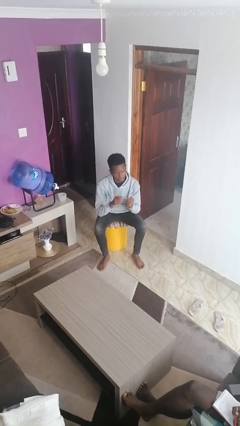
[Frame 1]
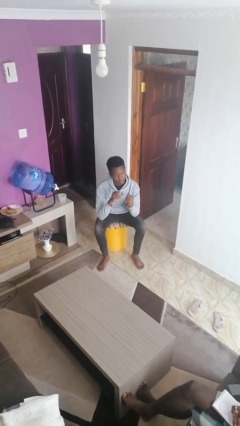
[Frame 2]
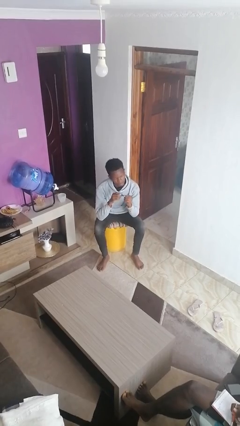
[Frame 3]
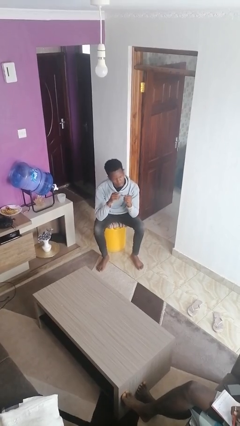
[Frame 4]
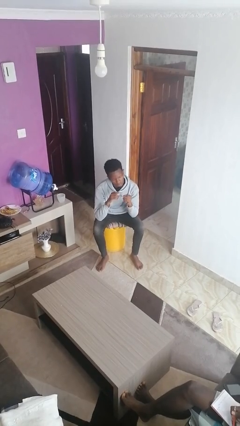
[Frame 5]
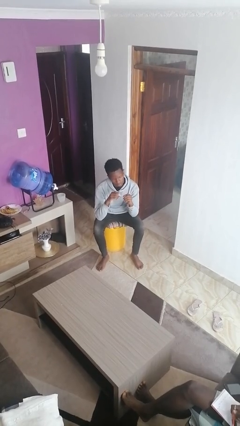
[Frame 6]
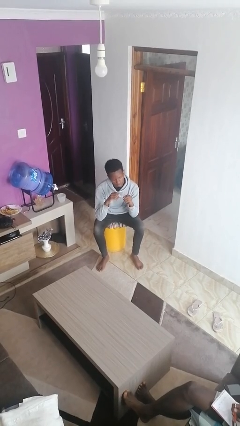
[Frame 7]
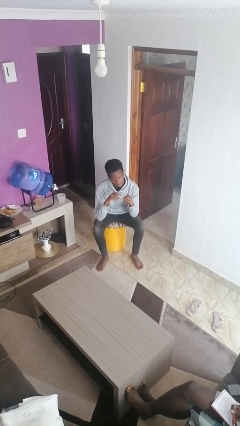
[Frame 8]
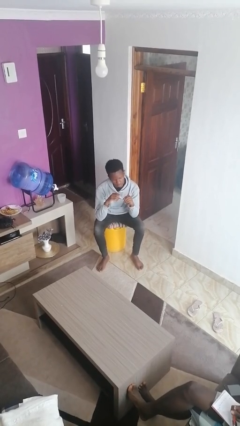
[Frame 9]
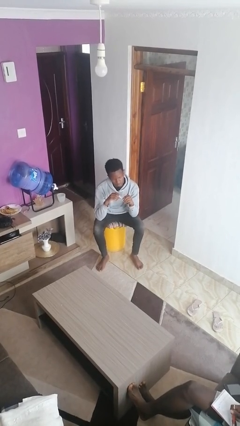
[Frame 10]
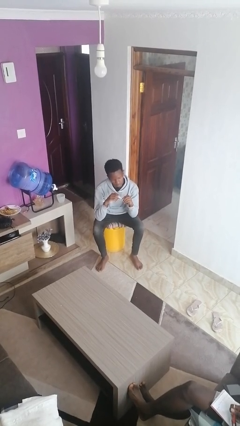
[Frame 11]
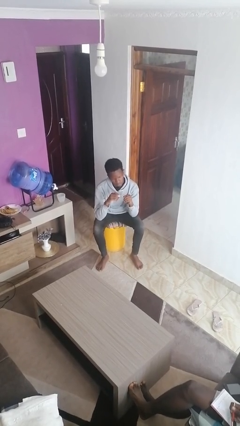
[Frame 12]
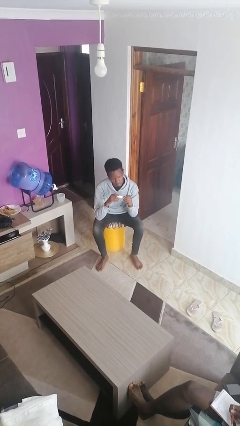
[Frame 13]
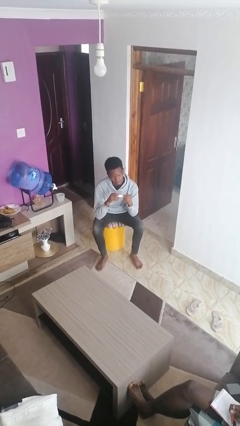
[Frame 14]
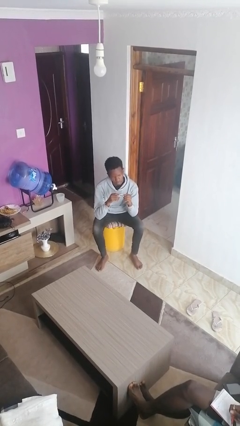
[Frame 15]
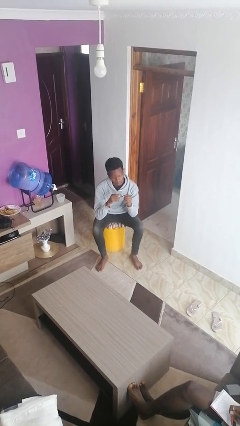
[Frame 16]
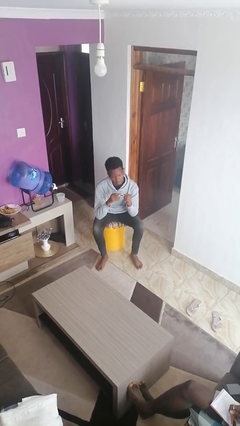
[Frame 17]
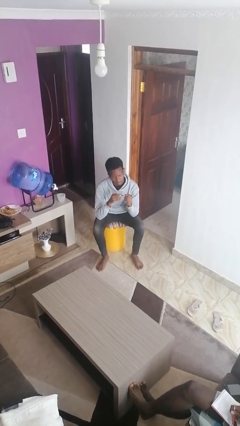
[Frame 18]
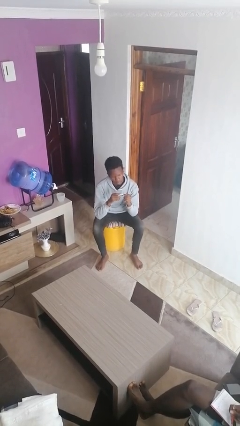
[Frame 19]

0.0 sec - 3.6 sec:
person clips fingernails

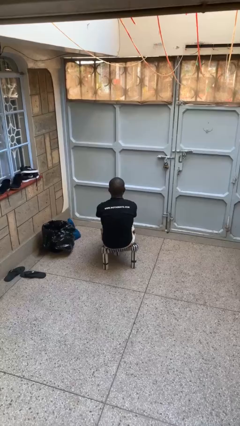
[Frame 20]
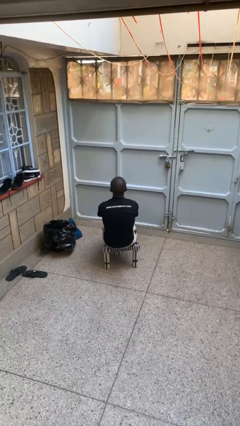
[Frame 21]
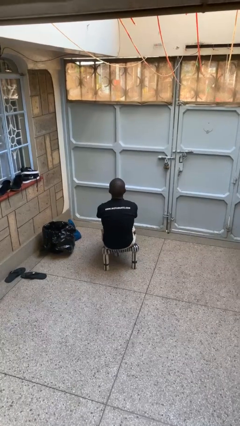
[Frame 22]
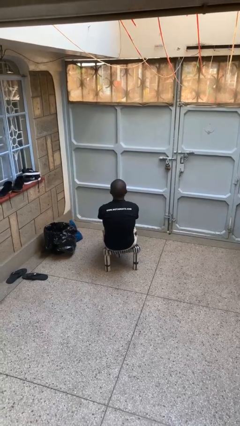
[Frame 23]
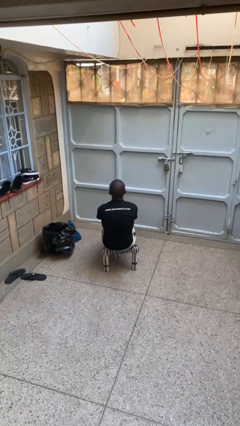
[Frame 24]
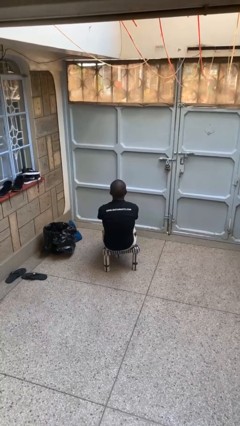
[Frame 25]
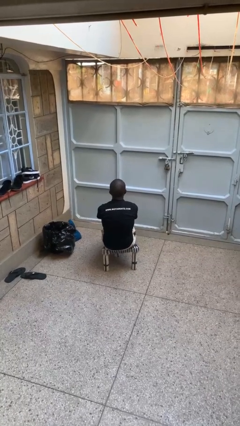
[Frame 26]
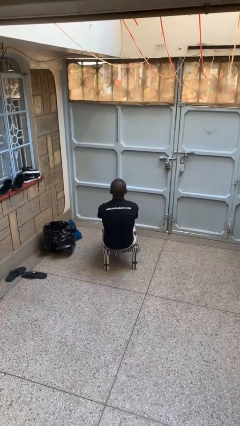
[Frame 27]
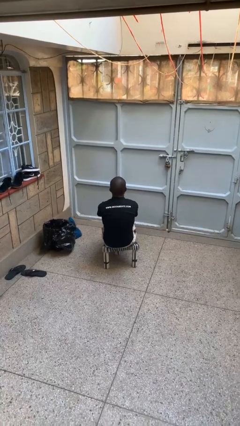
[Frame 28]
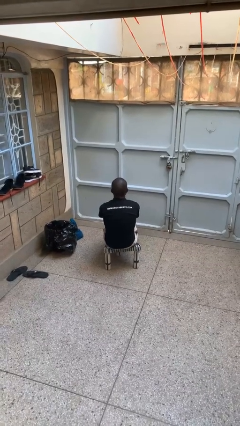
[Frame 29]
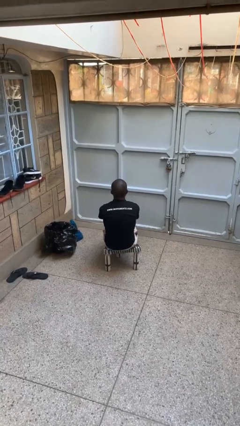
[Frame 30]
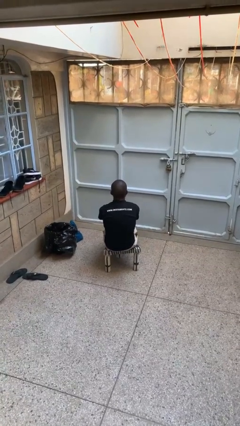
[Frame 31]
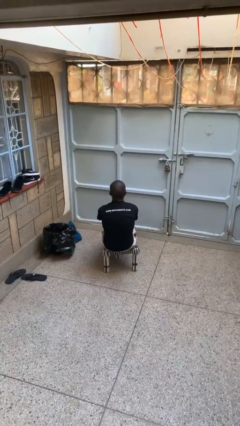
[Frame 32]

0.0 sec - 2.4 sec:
person nods head

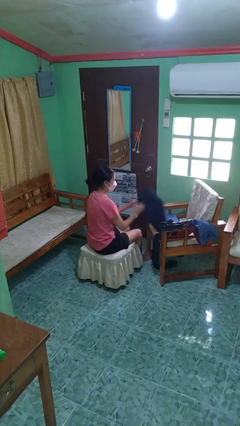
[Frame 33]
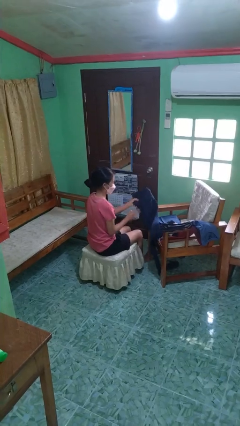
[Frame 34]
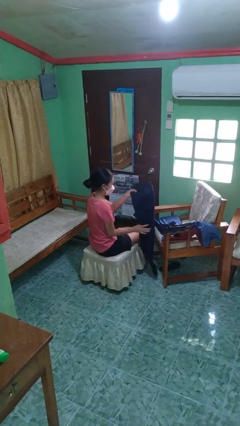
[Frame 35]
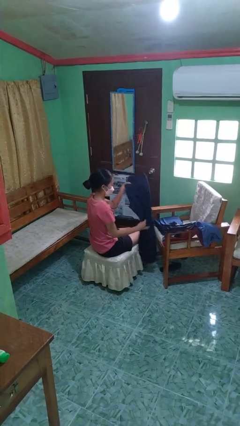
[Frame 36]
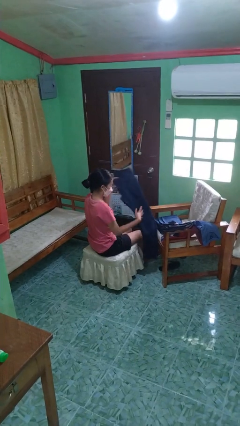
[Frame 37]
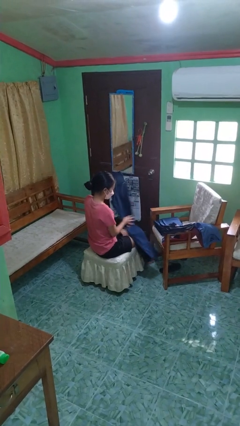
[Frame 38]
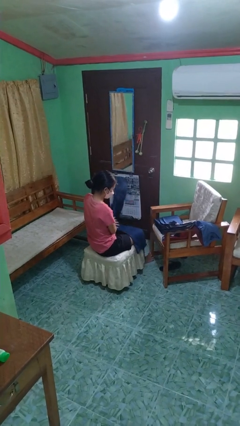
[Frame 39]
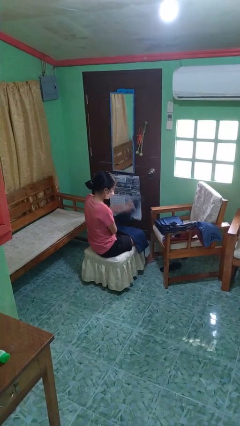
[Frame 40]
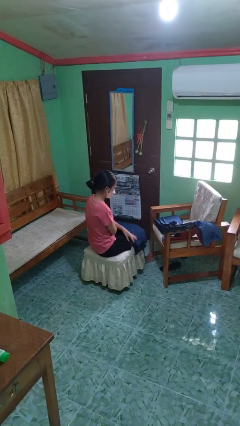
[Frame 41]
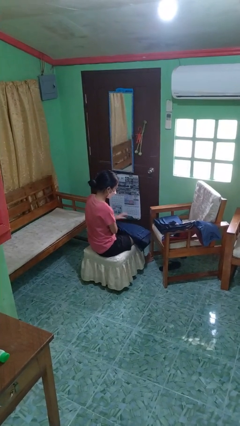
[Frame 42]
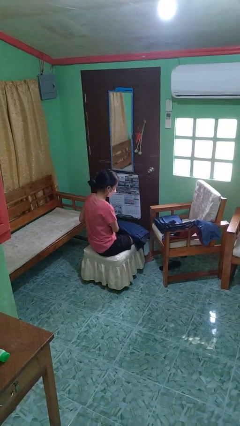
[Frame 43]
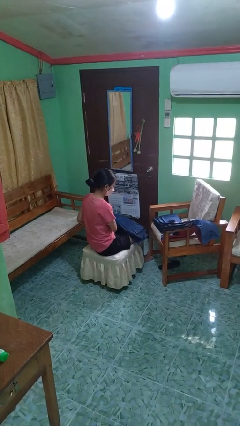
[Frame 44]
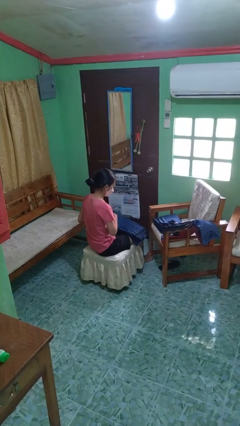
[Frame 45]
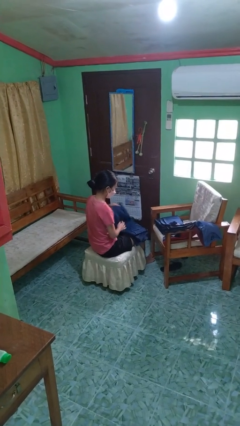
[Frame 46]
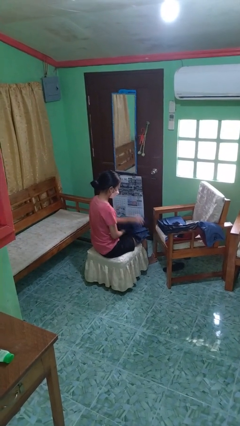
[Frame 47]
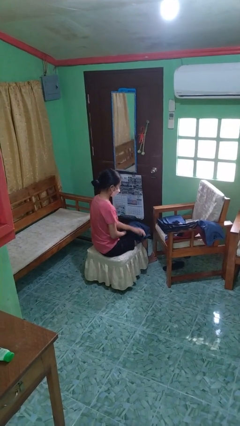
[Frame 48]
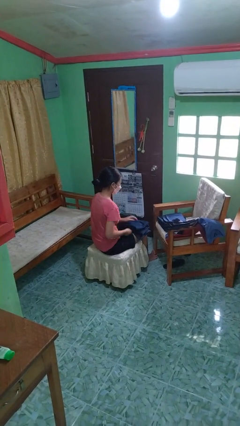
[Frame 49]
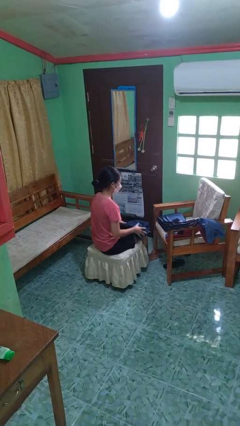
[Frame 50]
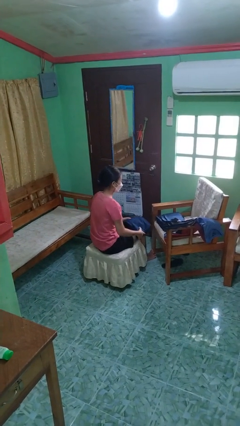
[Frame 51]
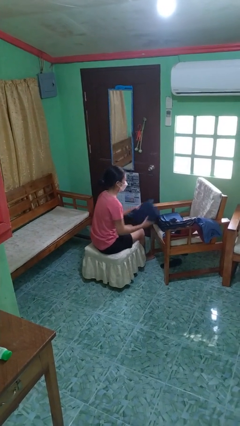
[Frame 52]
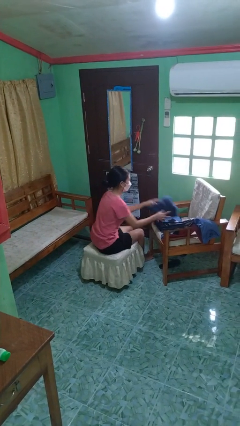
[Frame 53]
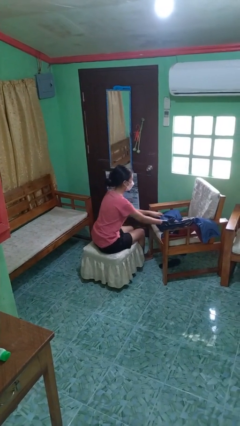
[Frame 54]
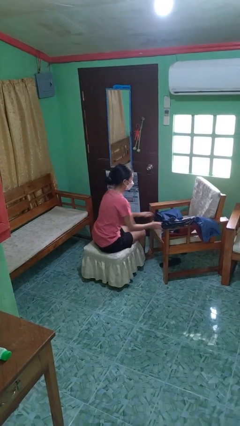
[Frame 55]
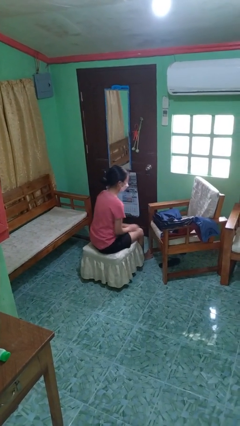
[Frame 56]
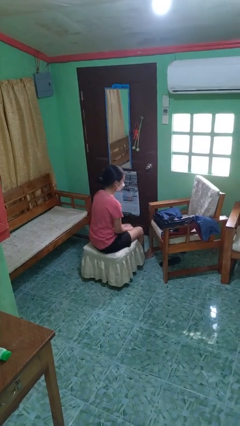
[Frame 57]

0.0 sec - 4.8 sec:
person folds pants

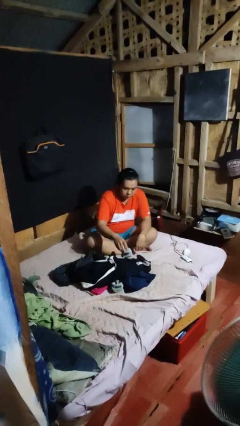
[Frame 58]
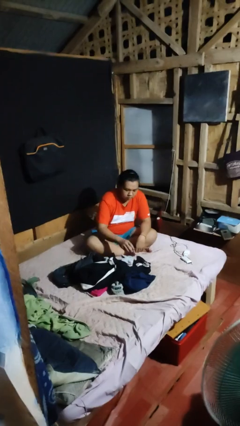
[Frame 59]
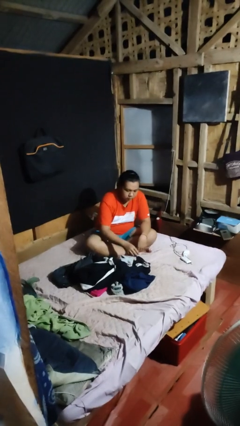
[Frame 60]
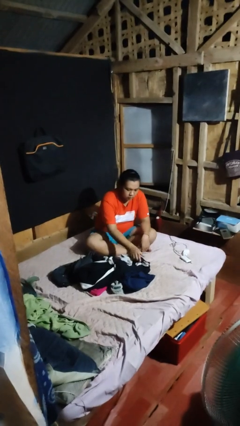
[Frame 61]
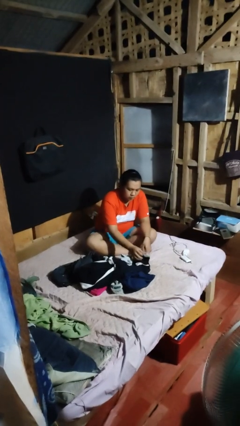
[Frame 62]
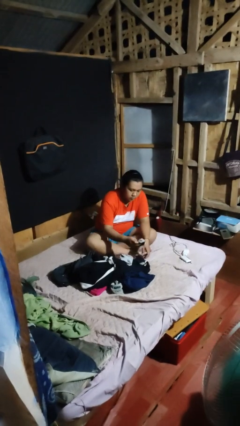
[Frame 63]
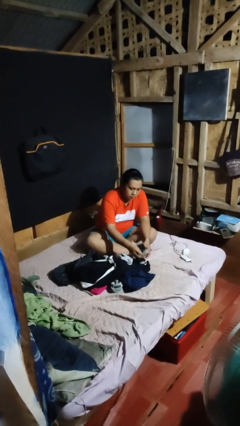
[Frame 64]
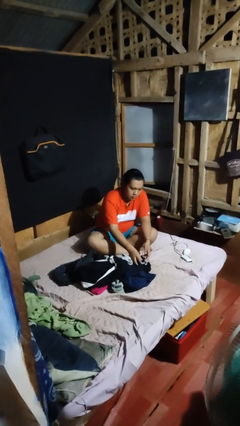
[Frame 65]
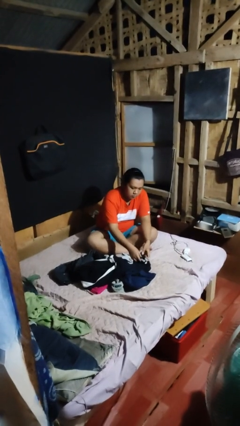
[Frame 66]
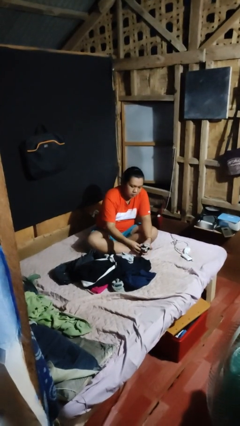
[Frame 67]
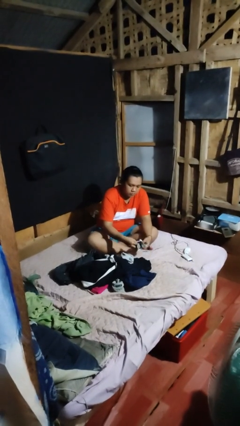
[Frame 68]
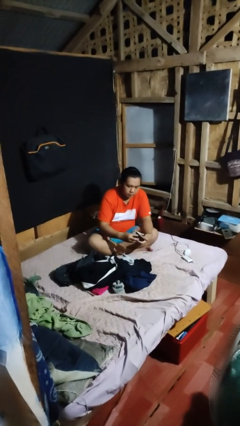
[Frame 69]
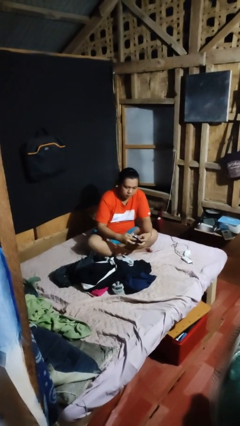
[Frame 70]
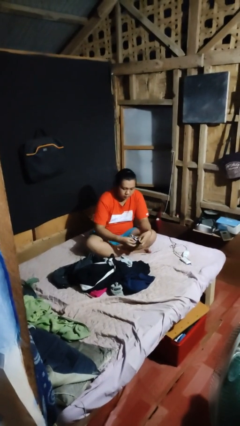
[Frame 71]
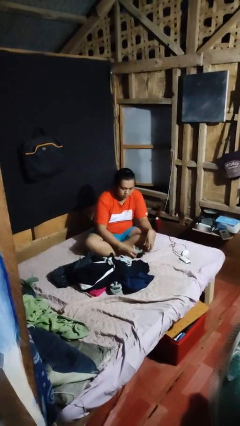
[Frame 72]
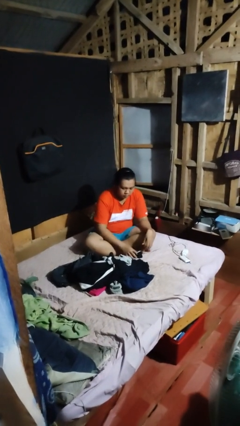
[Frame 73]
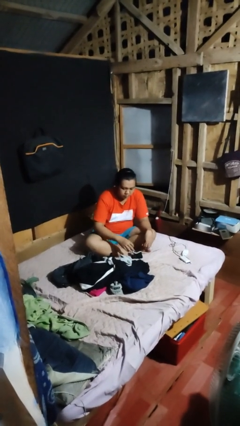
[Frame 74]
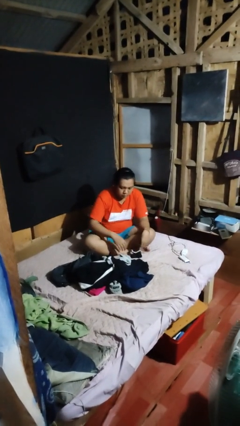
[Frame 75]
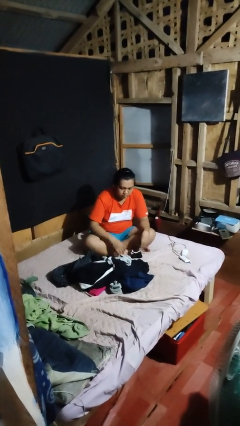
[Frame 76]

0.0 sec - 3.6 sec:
person folds socks

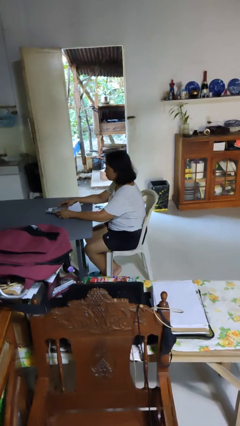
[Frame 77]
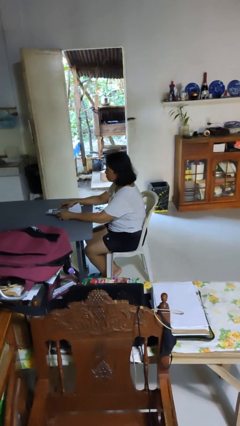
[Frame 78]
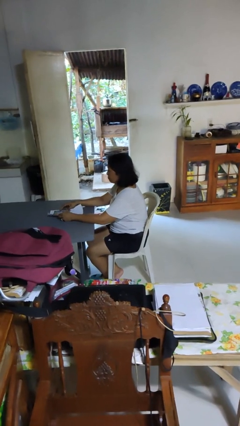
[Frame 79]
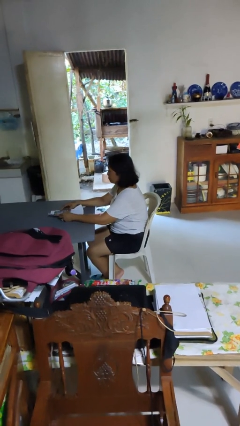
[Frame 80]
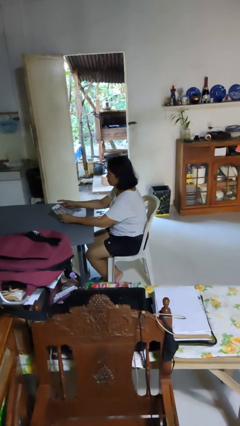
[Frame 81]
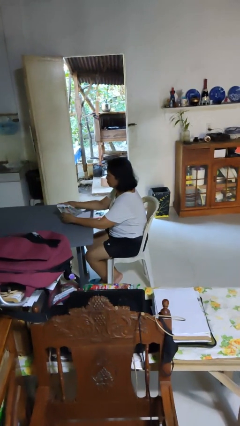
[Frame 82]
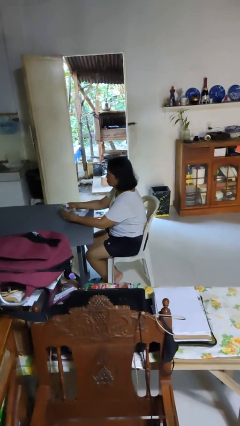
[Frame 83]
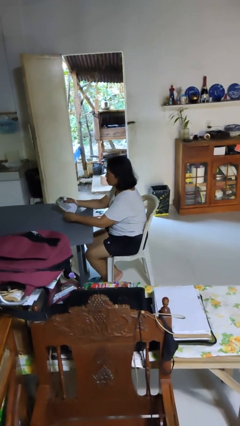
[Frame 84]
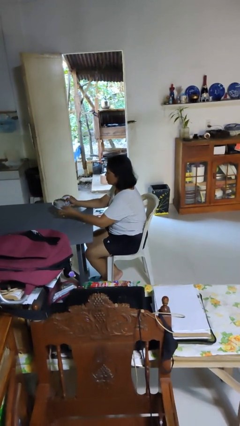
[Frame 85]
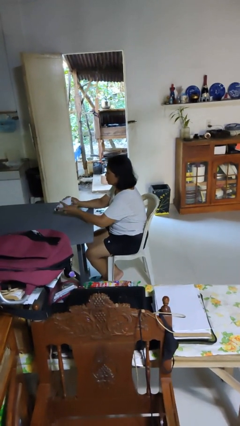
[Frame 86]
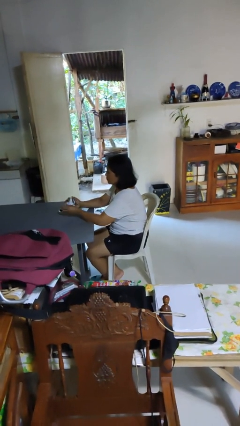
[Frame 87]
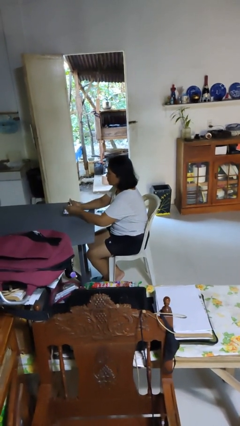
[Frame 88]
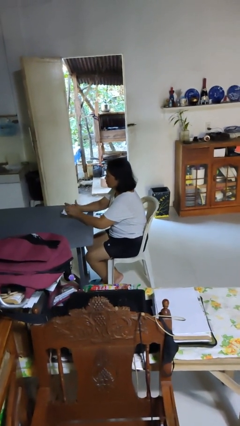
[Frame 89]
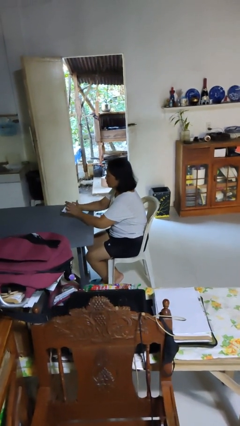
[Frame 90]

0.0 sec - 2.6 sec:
person crumples paper

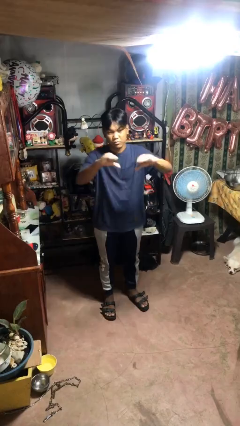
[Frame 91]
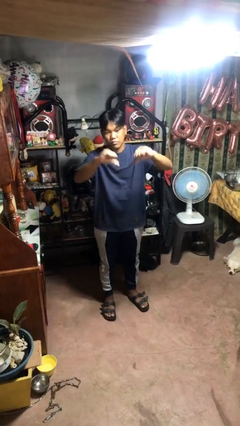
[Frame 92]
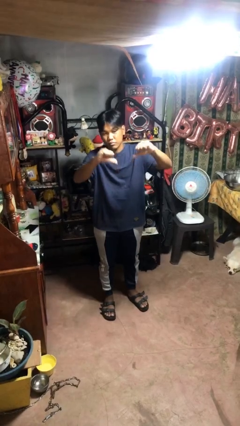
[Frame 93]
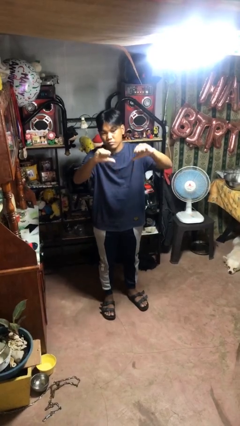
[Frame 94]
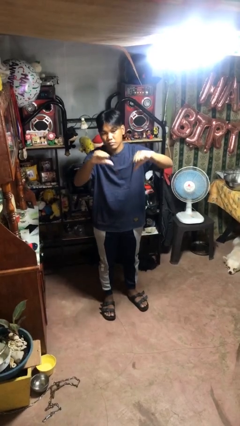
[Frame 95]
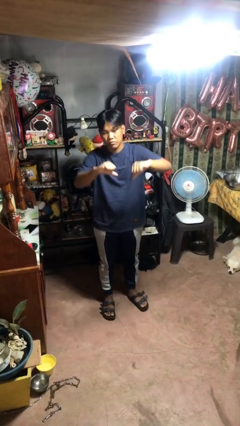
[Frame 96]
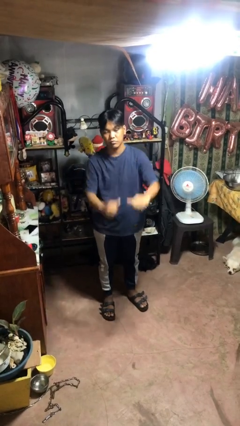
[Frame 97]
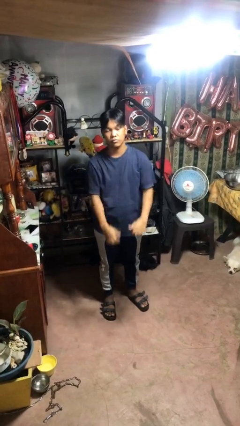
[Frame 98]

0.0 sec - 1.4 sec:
person gestures thumbs down
